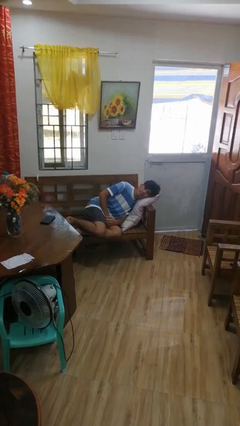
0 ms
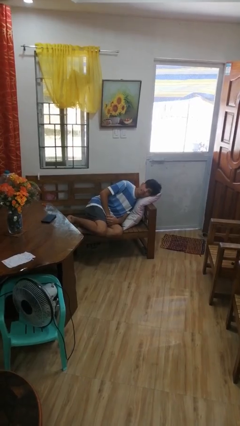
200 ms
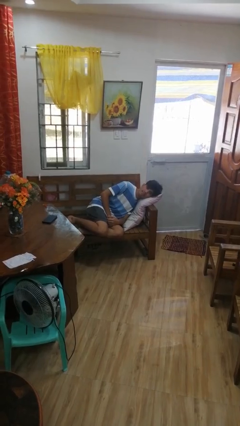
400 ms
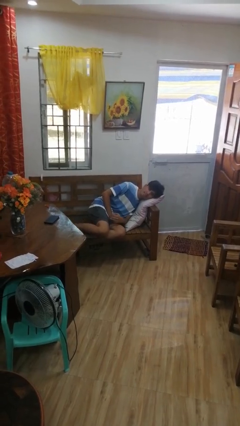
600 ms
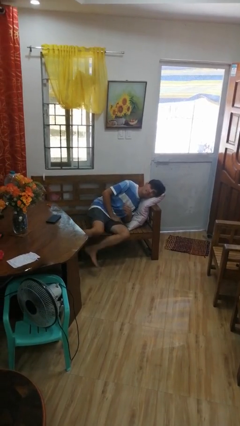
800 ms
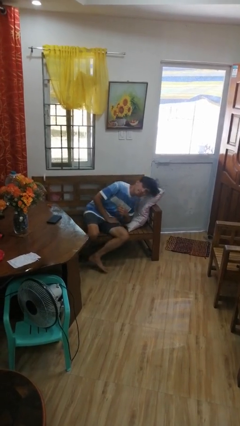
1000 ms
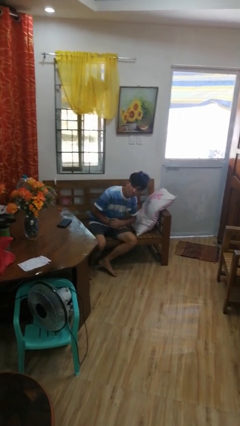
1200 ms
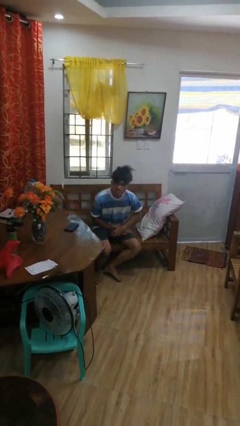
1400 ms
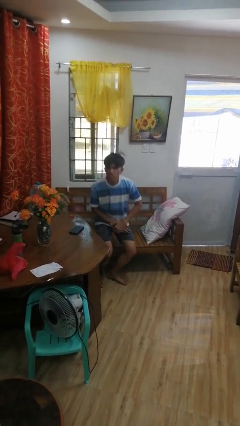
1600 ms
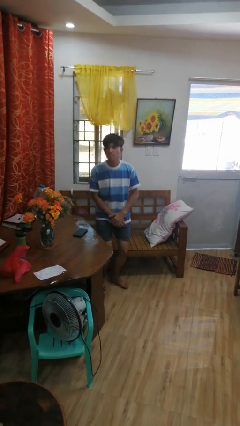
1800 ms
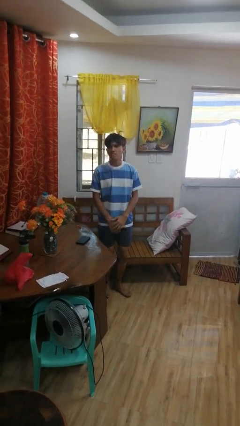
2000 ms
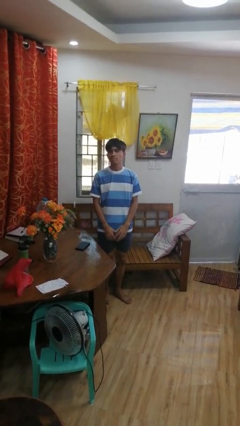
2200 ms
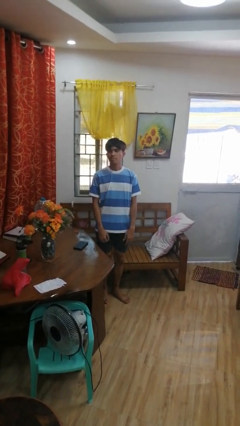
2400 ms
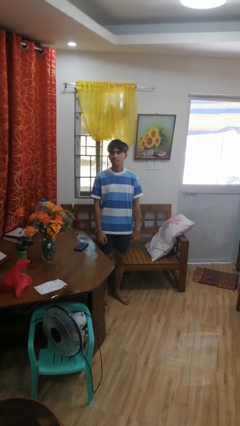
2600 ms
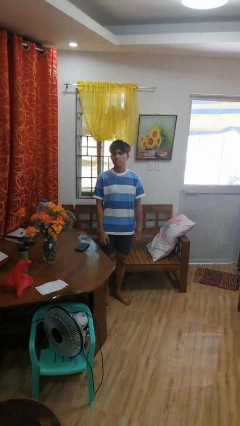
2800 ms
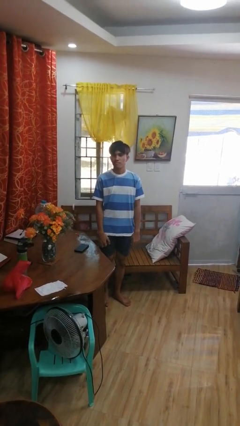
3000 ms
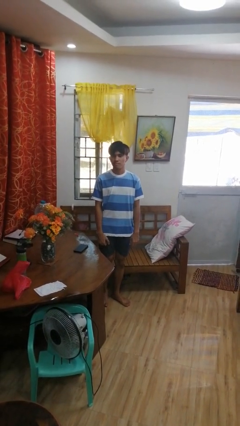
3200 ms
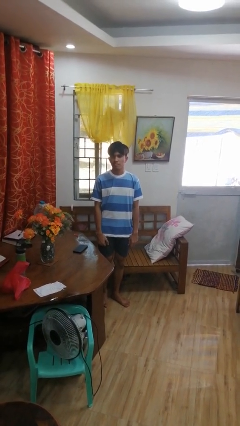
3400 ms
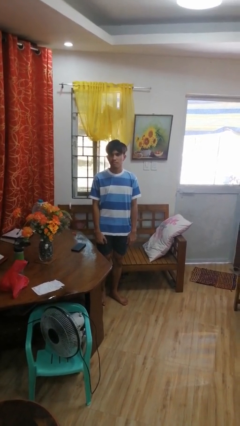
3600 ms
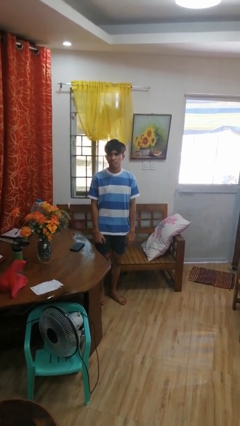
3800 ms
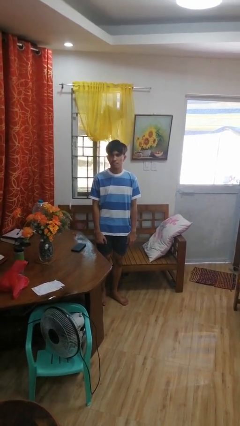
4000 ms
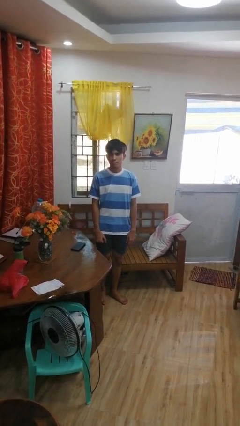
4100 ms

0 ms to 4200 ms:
person stands up

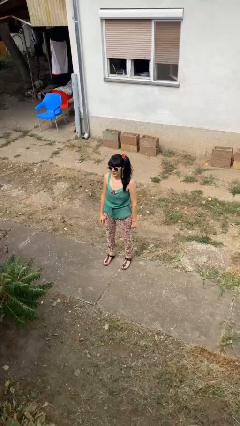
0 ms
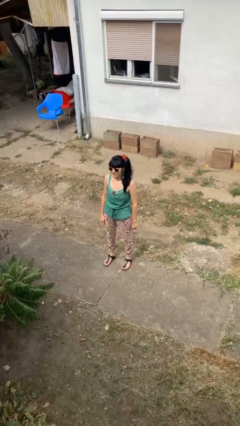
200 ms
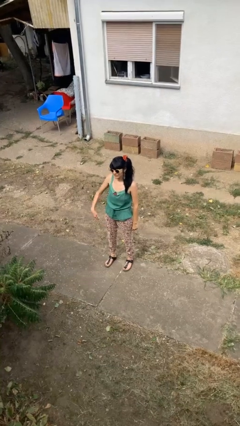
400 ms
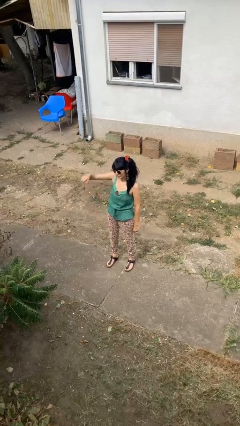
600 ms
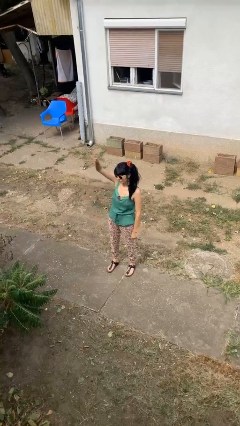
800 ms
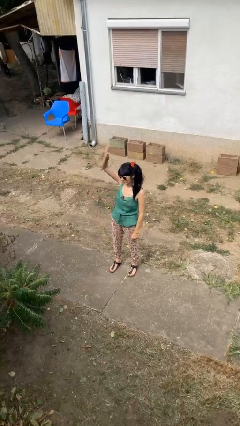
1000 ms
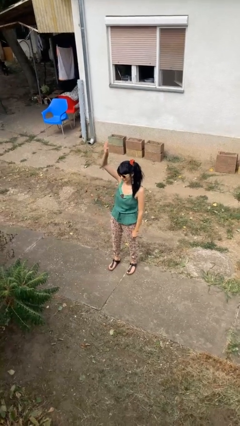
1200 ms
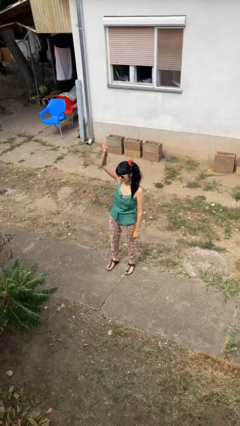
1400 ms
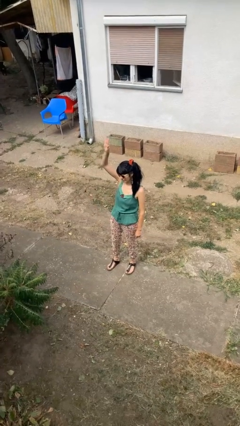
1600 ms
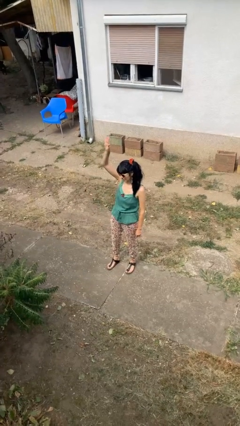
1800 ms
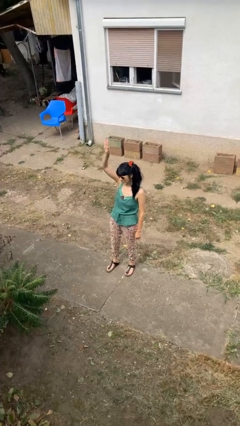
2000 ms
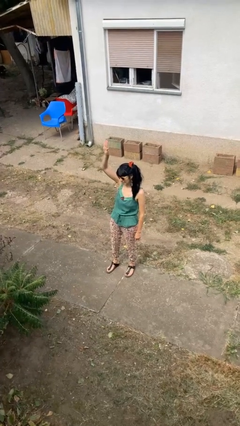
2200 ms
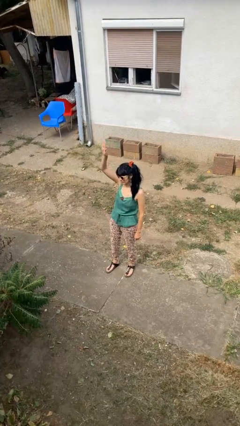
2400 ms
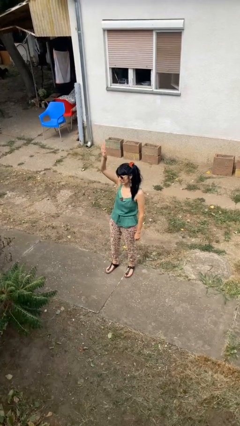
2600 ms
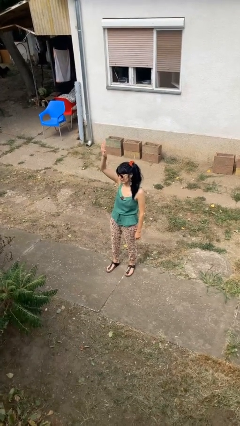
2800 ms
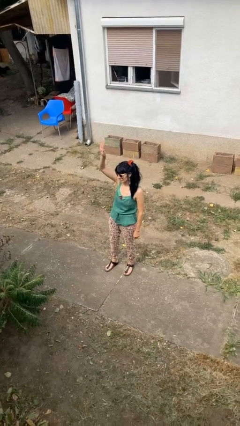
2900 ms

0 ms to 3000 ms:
person gestures raise hand

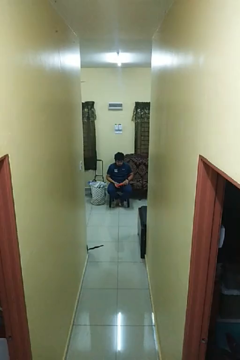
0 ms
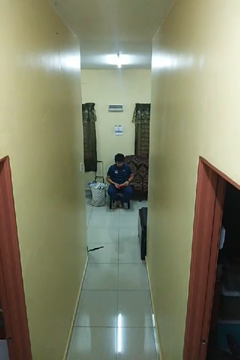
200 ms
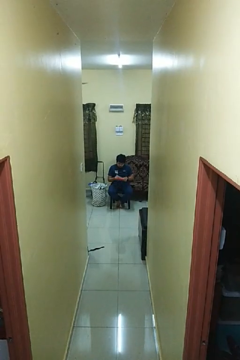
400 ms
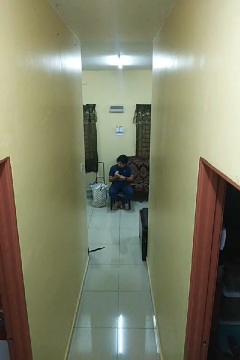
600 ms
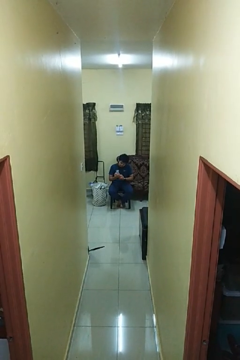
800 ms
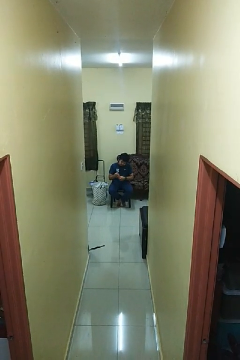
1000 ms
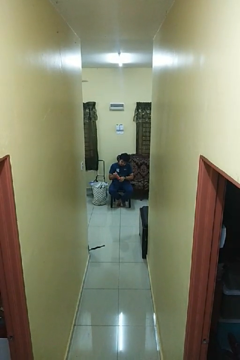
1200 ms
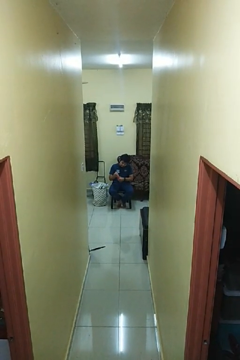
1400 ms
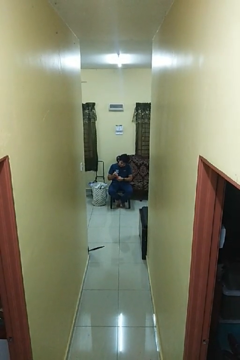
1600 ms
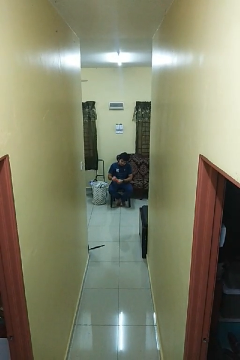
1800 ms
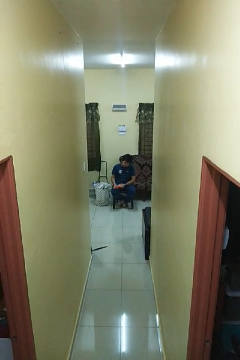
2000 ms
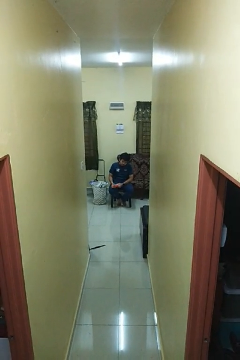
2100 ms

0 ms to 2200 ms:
person squeezes object

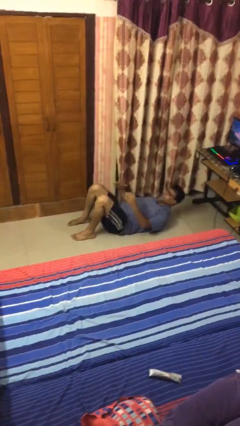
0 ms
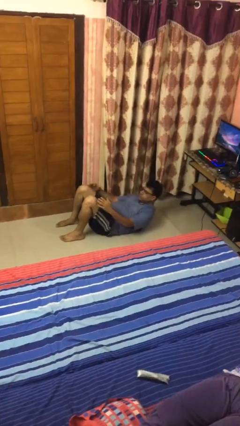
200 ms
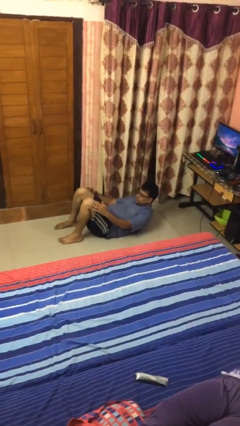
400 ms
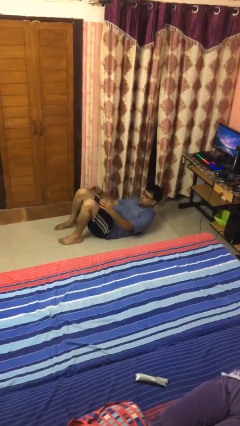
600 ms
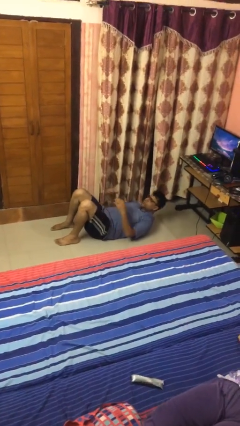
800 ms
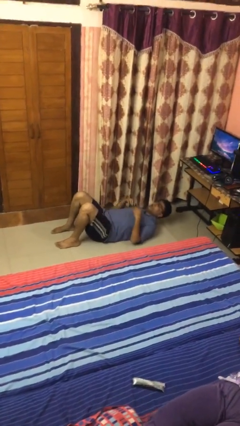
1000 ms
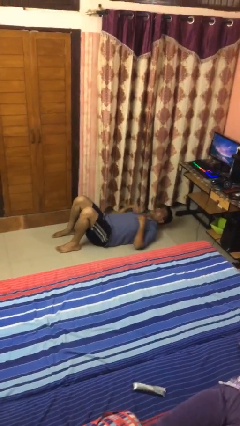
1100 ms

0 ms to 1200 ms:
person exercises with situp

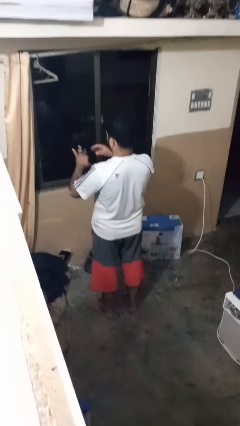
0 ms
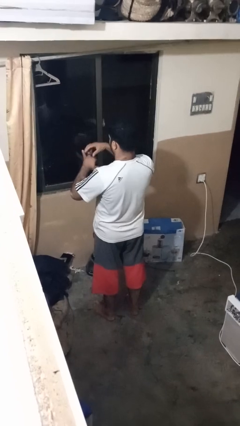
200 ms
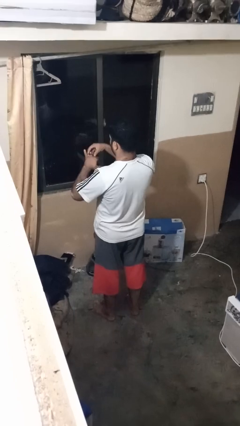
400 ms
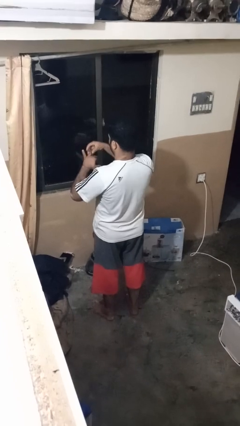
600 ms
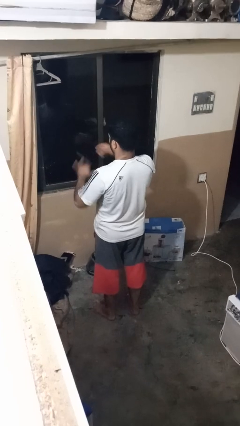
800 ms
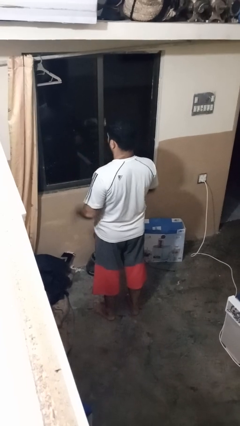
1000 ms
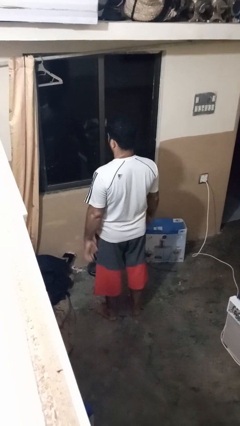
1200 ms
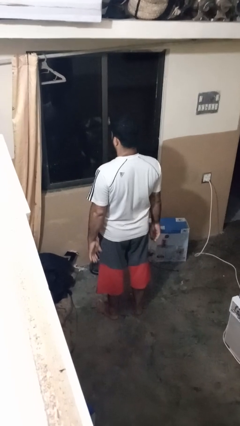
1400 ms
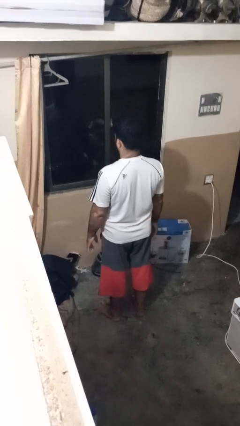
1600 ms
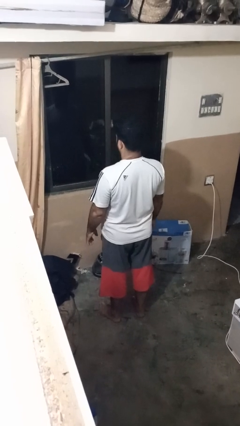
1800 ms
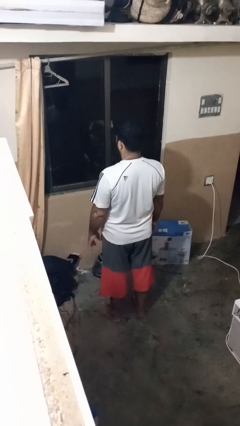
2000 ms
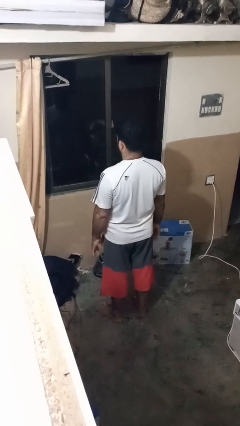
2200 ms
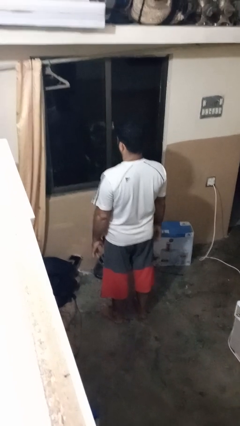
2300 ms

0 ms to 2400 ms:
person takes off ring

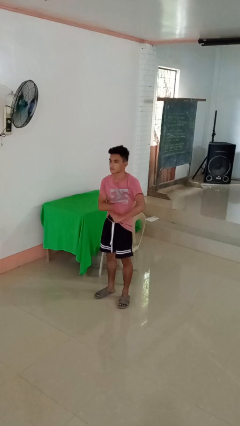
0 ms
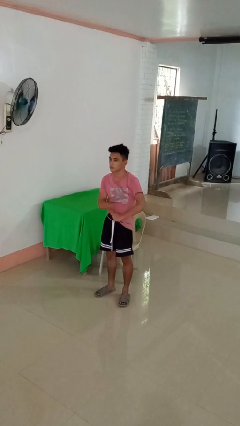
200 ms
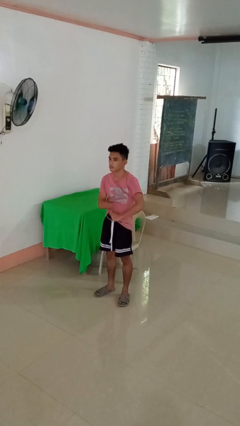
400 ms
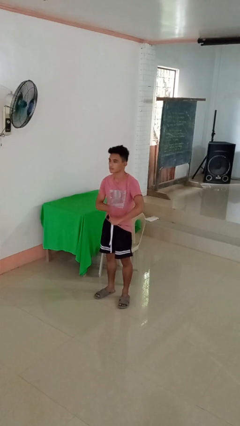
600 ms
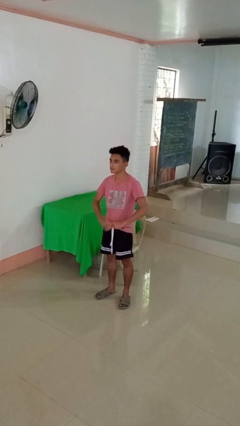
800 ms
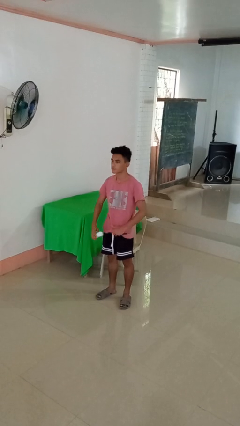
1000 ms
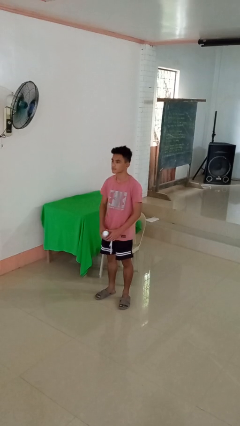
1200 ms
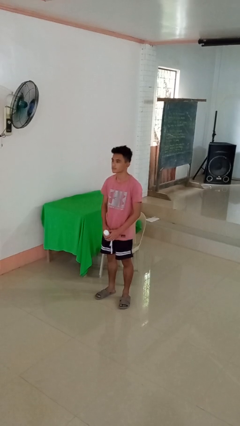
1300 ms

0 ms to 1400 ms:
person applies deodorant

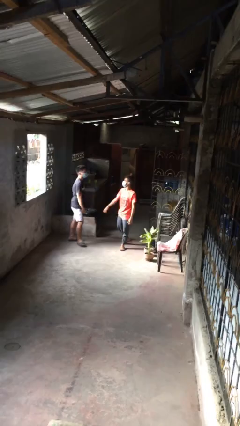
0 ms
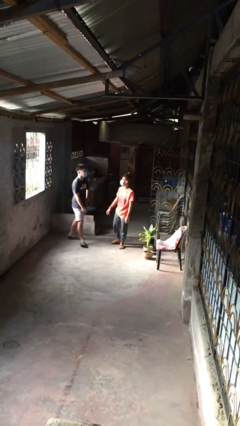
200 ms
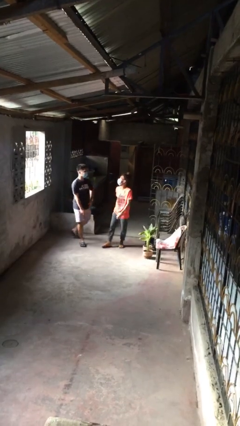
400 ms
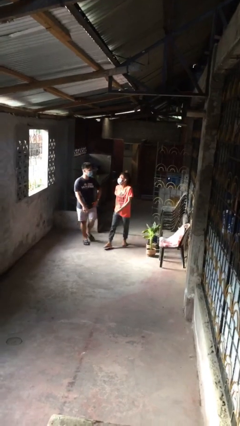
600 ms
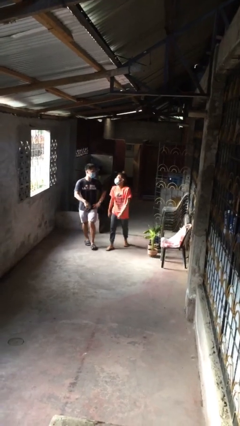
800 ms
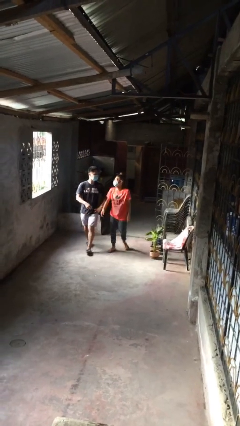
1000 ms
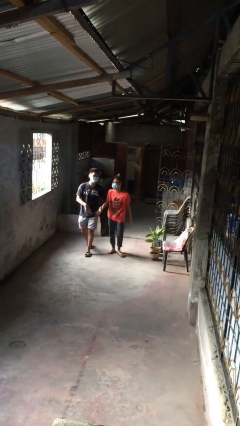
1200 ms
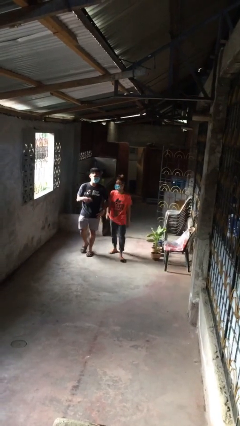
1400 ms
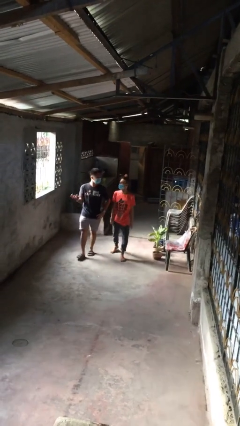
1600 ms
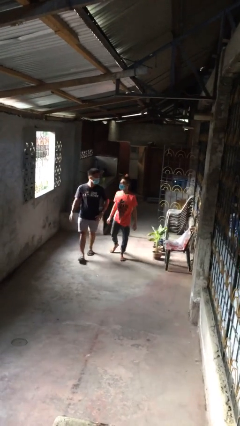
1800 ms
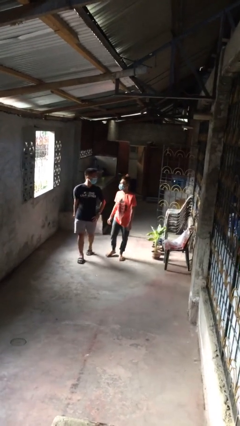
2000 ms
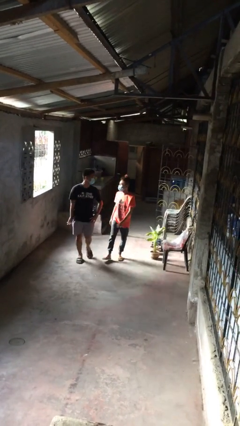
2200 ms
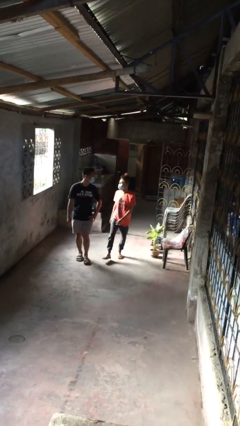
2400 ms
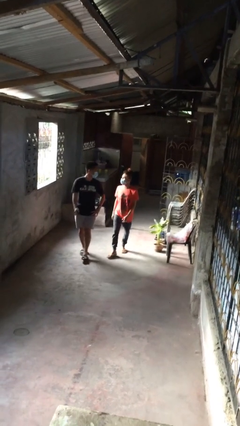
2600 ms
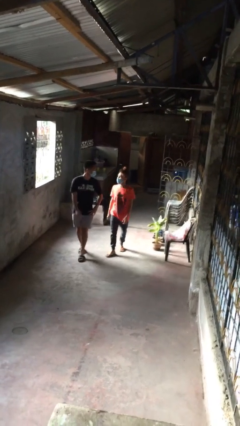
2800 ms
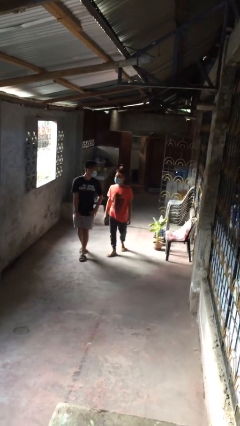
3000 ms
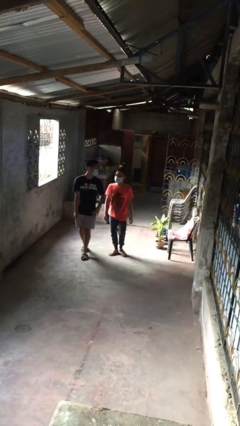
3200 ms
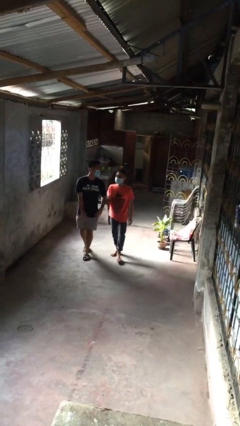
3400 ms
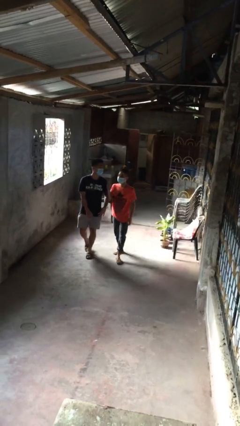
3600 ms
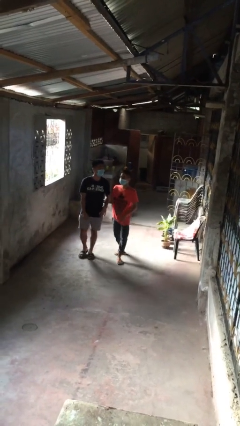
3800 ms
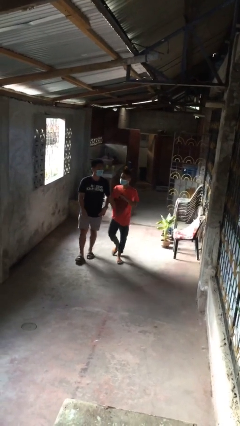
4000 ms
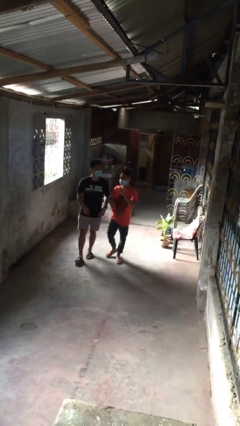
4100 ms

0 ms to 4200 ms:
person talks to person
